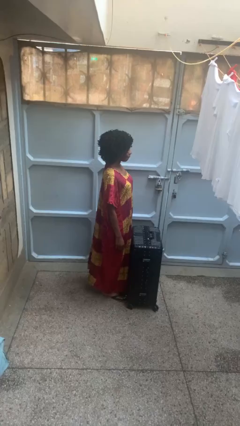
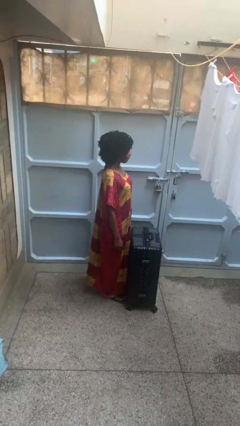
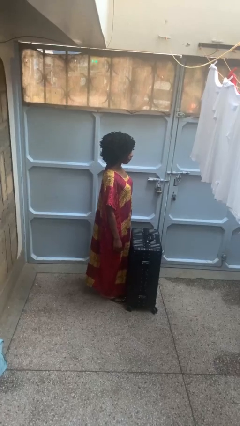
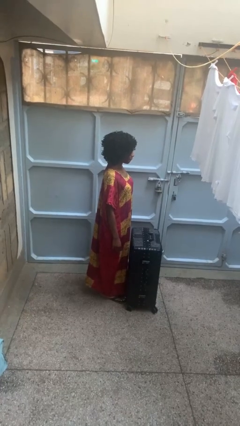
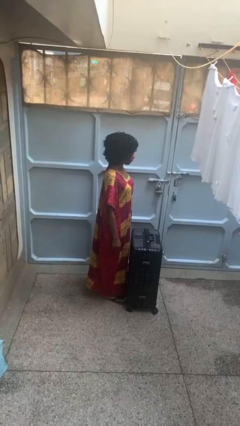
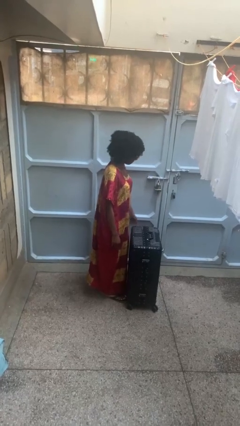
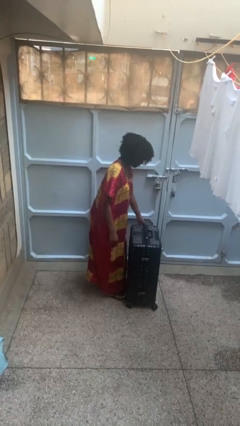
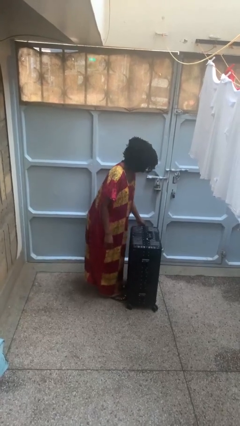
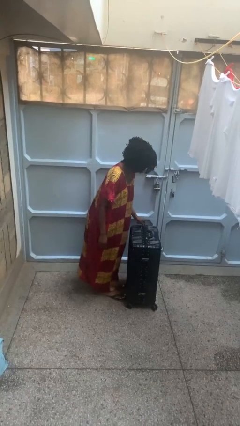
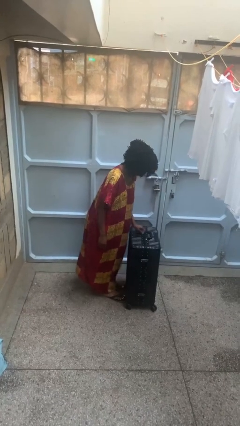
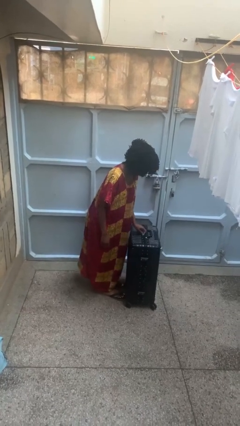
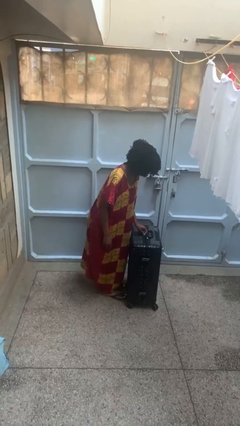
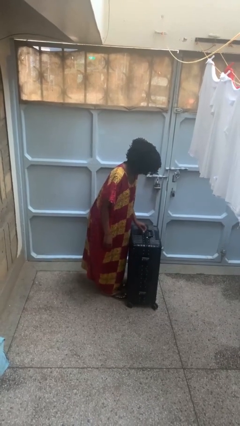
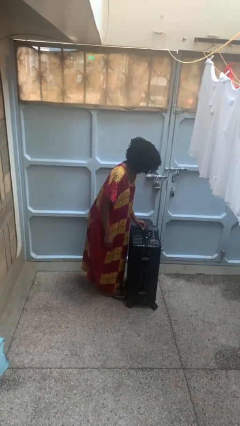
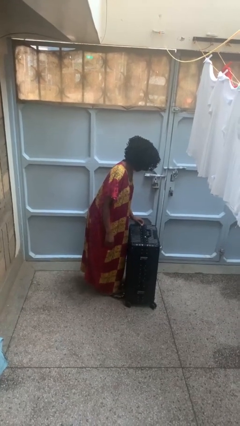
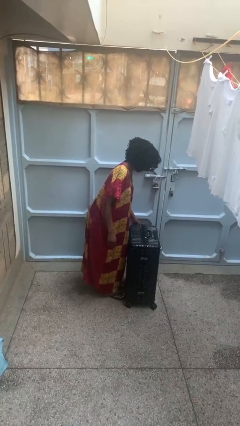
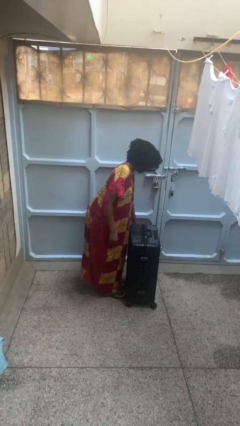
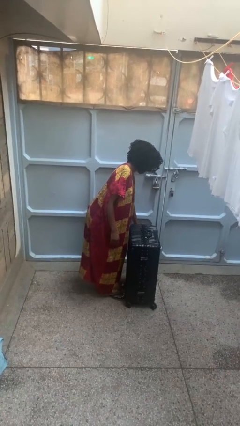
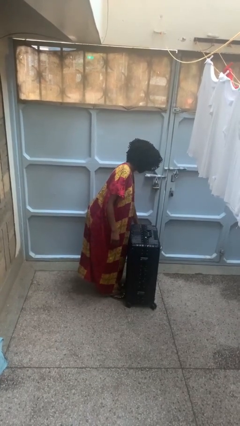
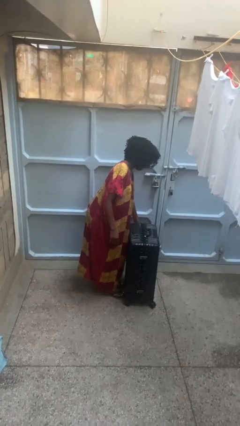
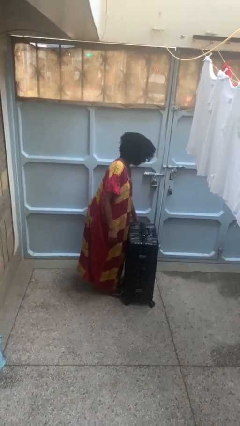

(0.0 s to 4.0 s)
person opens suitcase

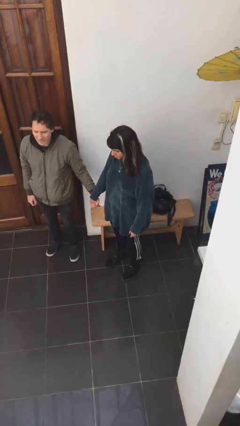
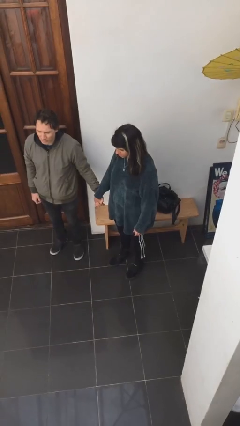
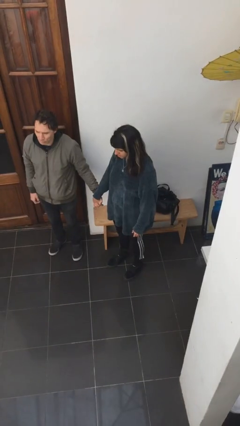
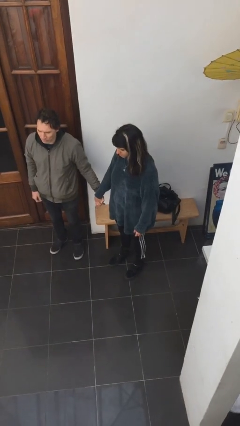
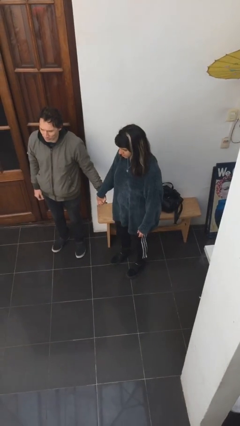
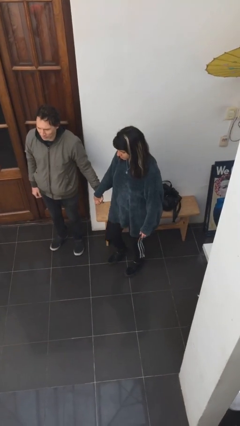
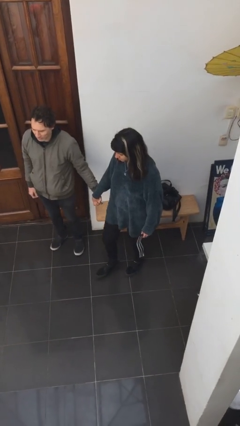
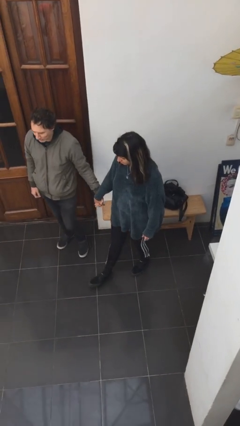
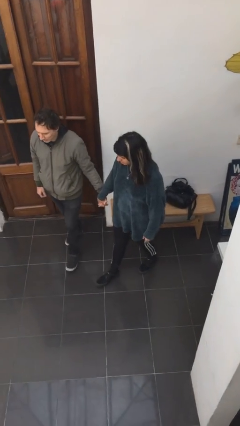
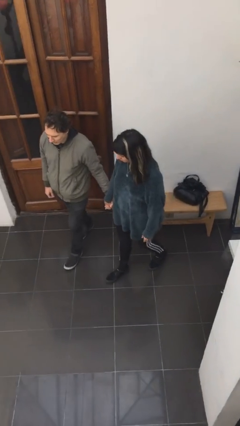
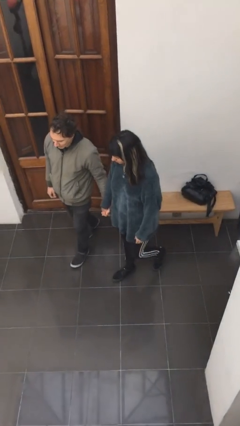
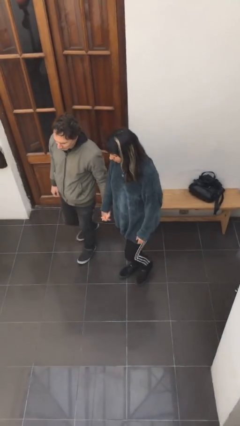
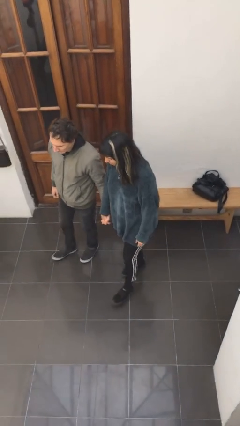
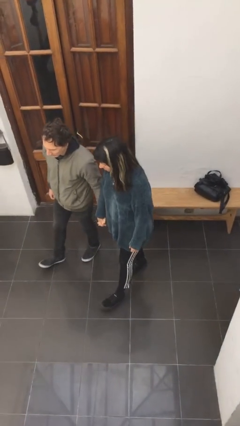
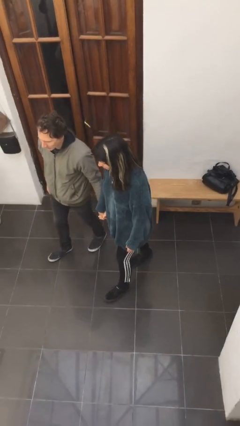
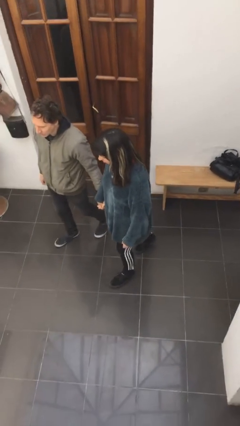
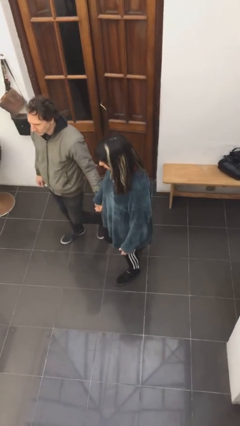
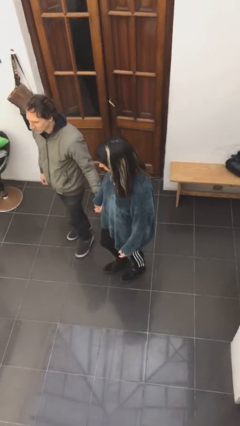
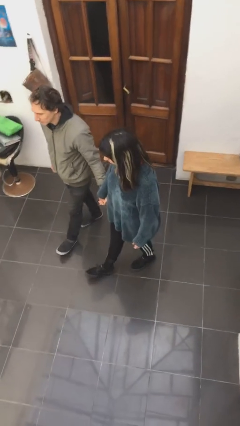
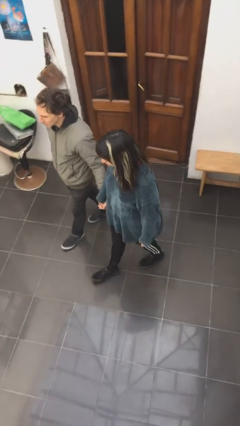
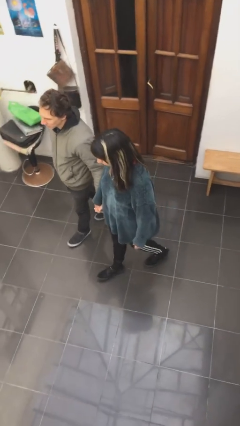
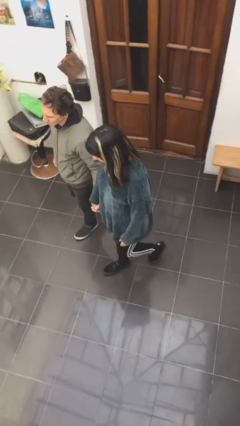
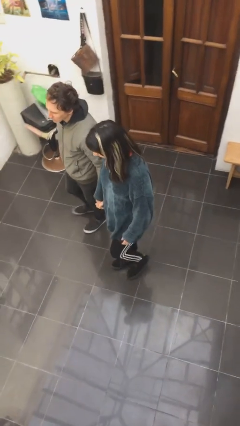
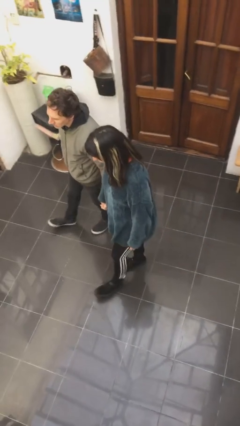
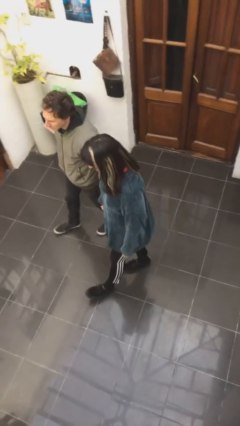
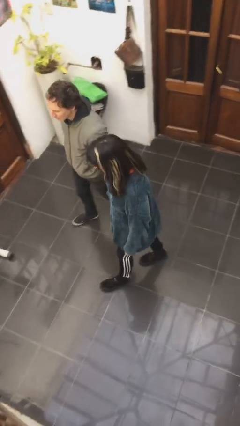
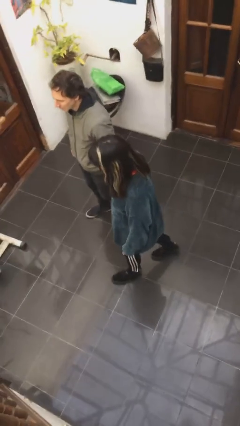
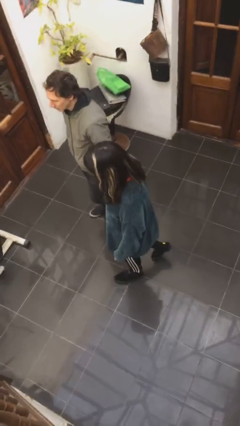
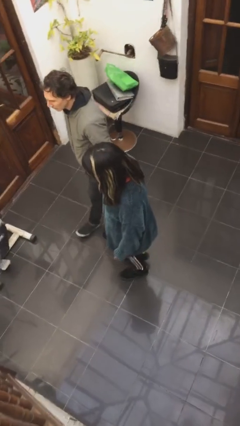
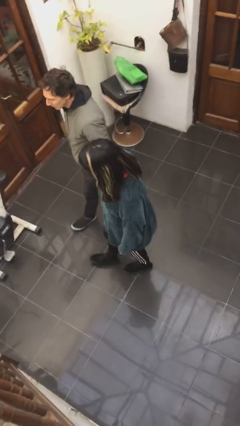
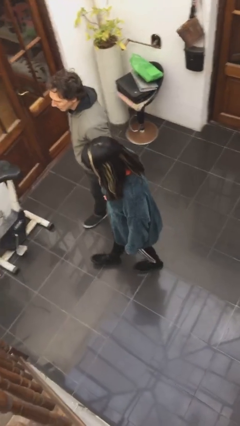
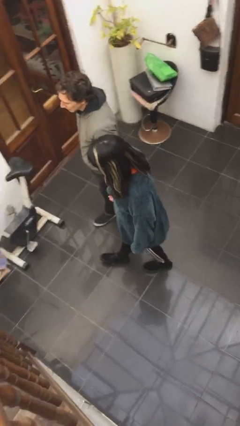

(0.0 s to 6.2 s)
person holds hand

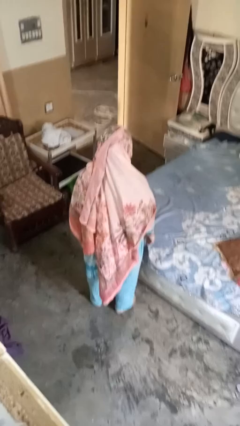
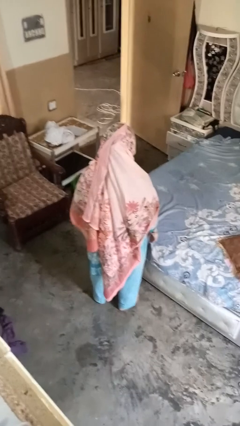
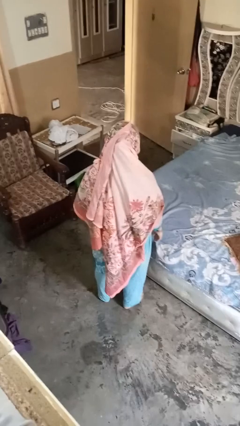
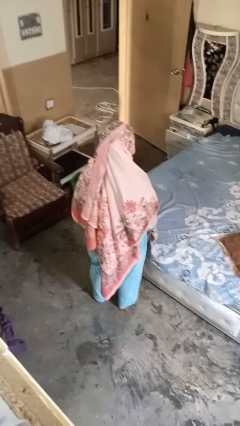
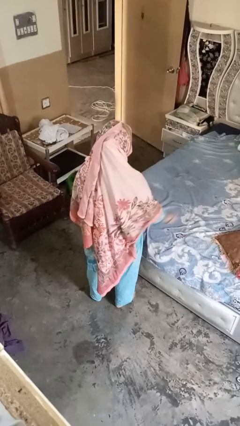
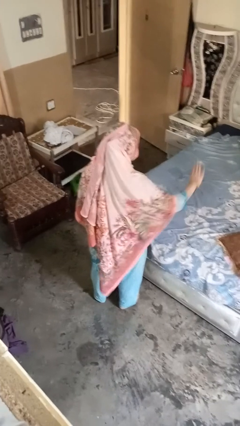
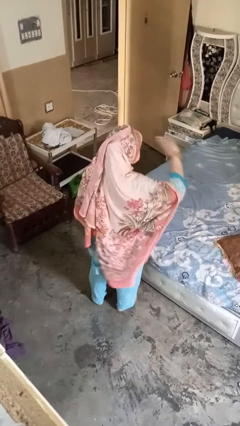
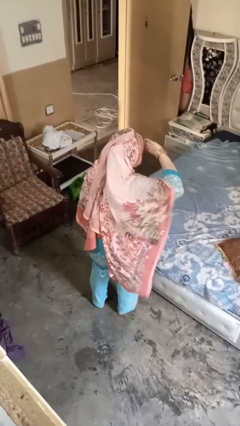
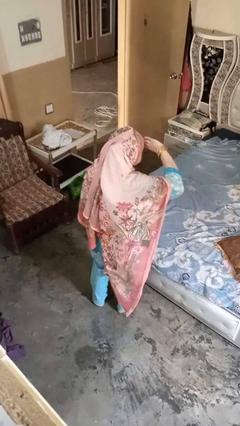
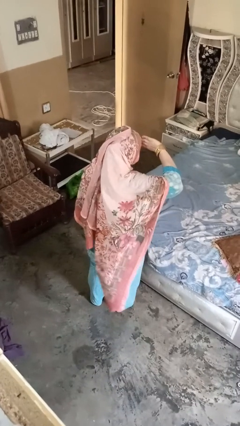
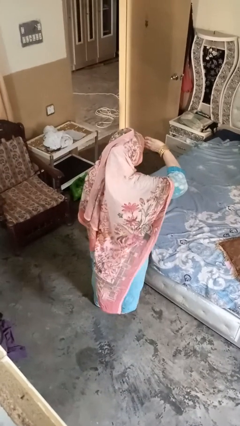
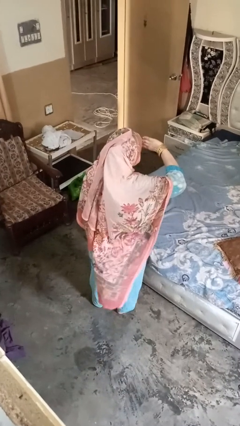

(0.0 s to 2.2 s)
person salutes

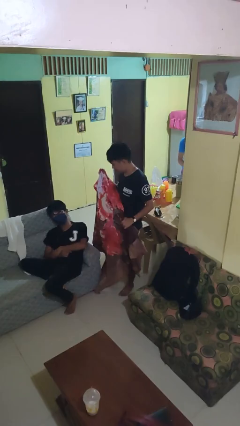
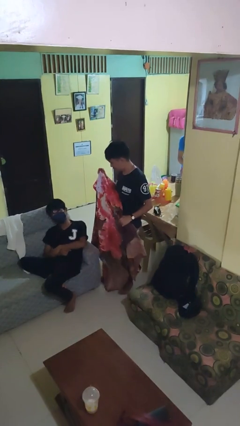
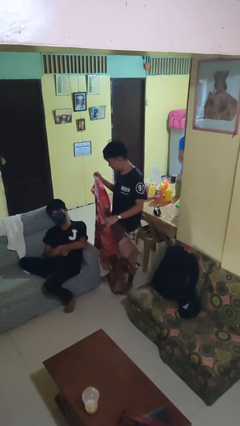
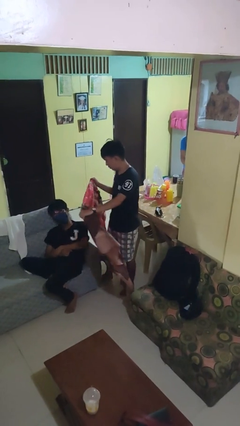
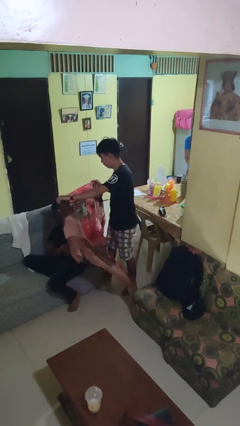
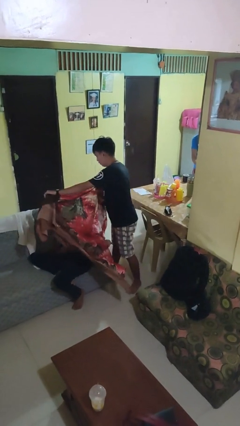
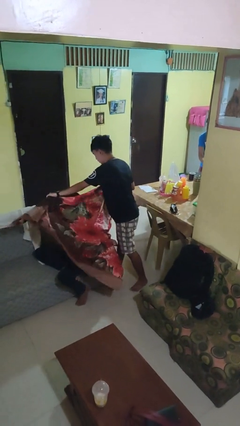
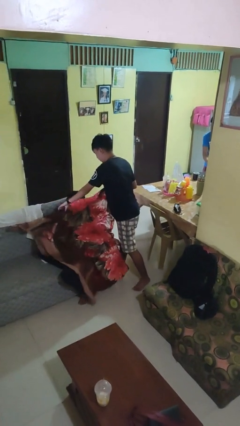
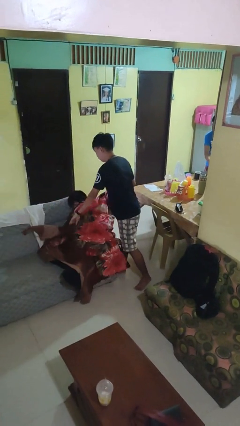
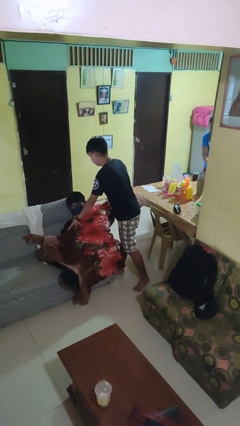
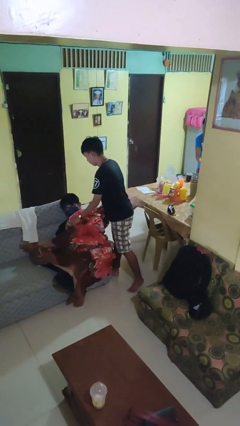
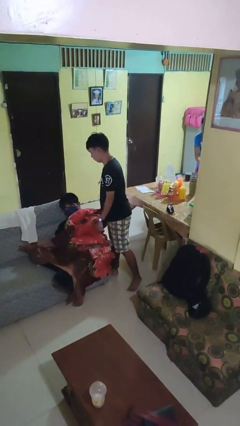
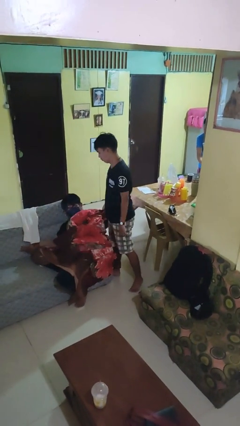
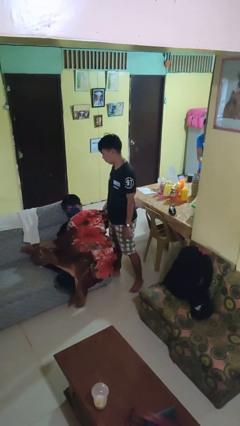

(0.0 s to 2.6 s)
person covers friend with blanket

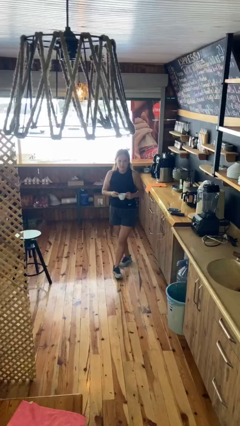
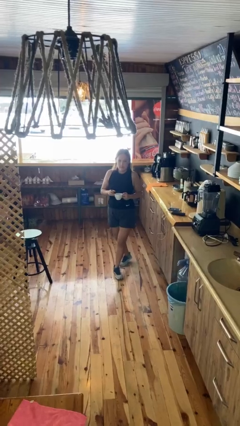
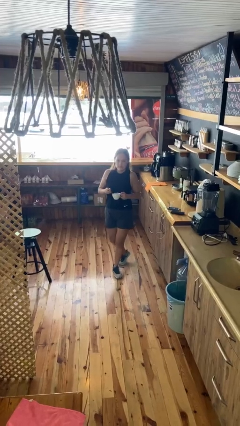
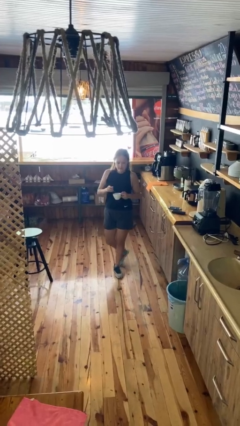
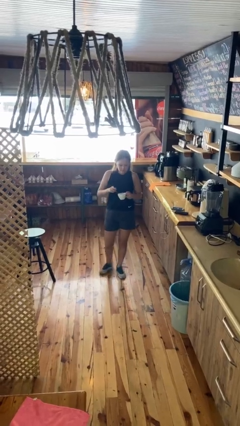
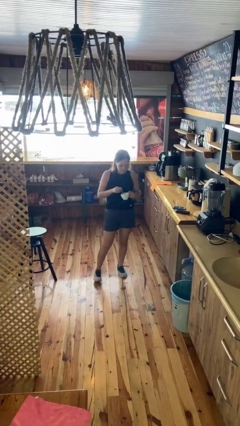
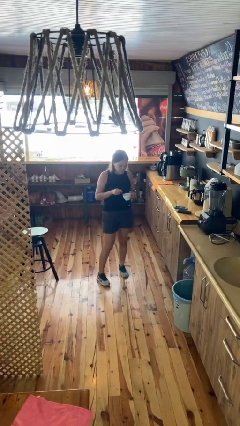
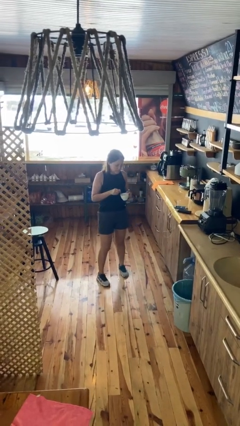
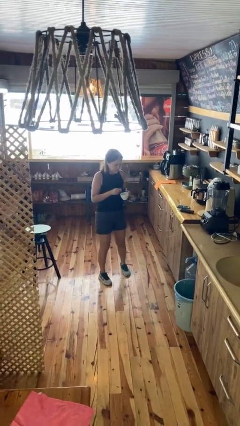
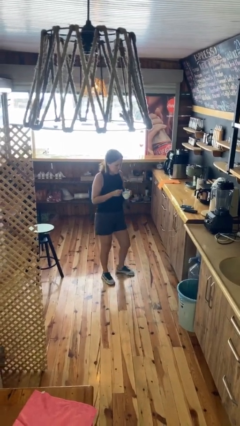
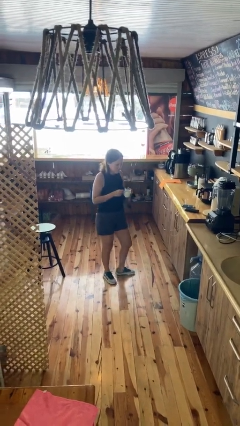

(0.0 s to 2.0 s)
person stirs mug

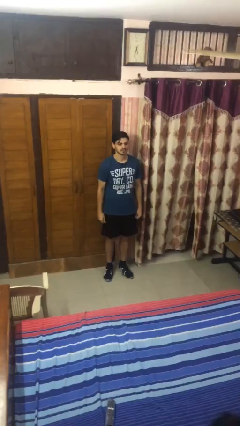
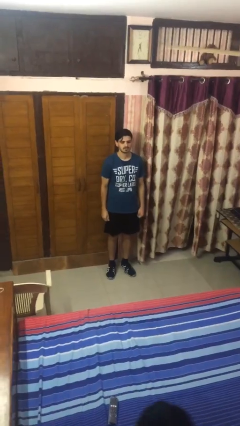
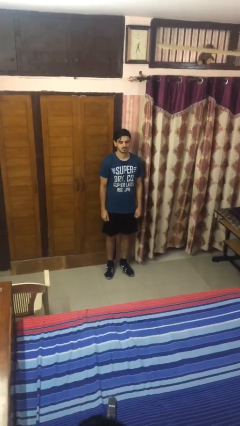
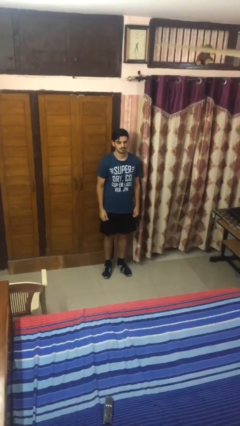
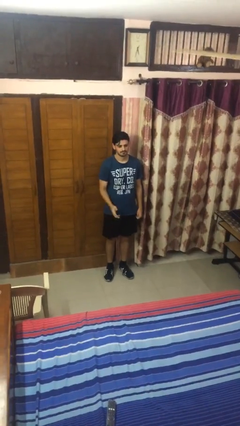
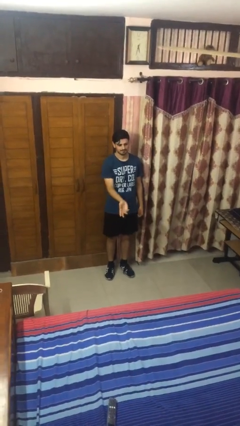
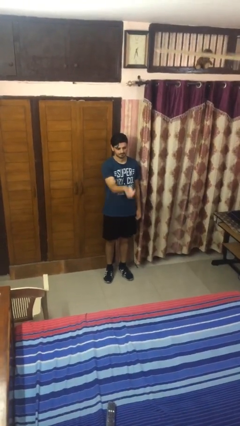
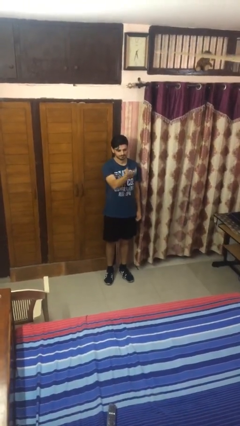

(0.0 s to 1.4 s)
person gestures swipe up
